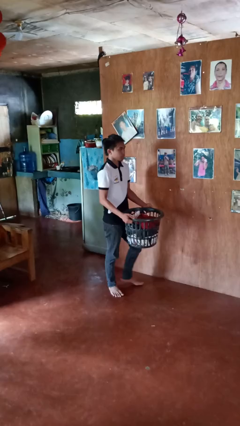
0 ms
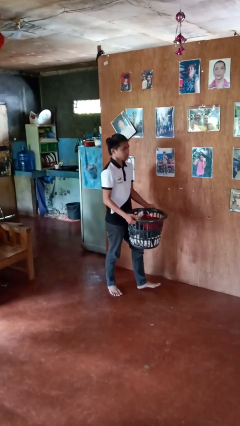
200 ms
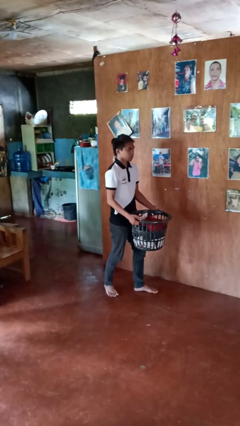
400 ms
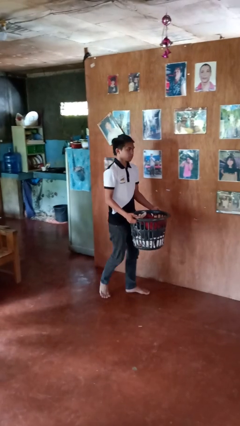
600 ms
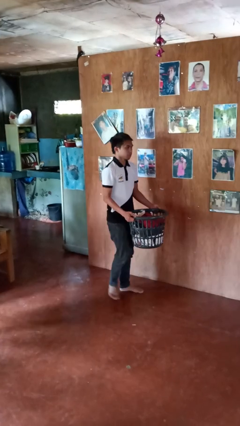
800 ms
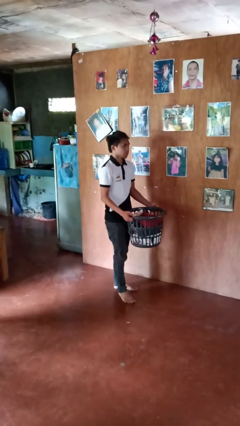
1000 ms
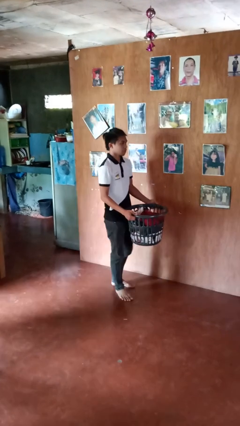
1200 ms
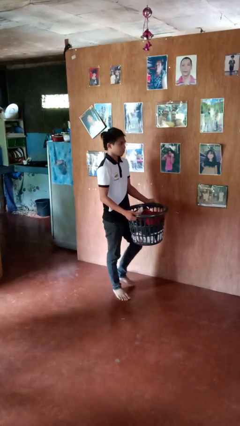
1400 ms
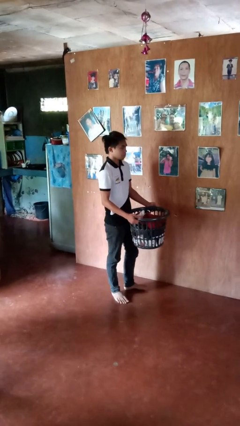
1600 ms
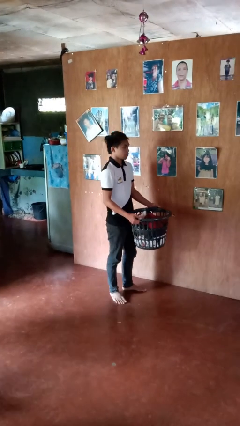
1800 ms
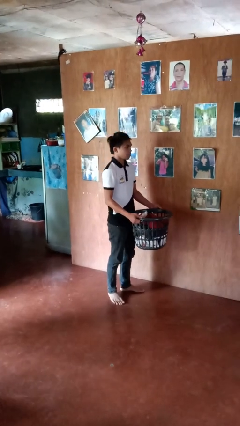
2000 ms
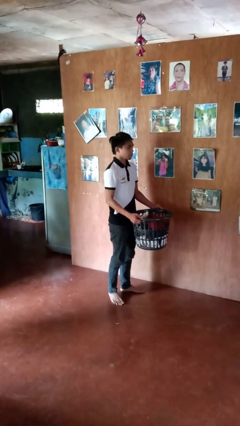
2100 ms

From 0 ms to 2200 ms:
person carries laundry basket

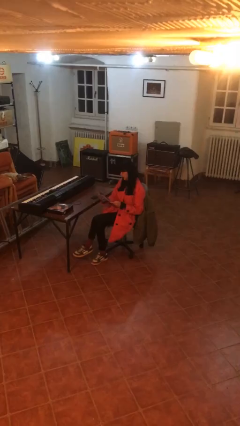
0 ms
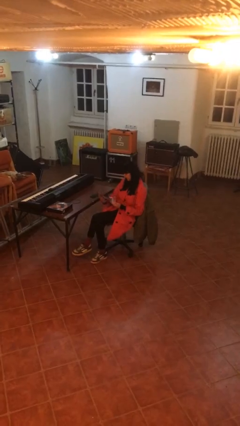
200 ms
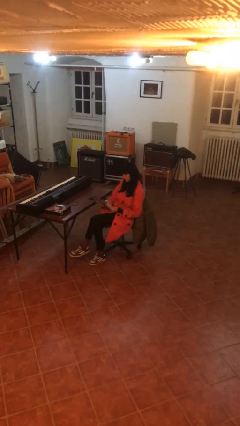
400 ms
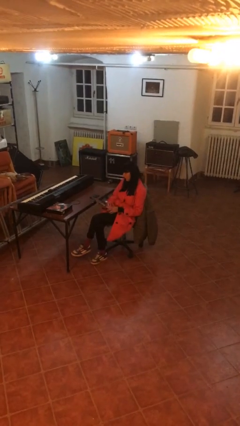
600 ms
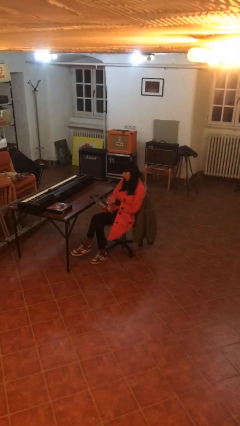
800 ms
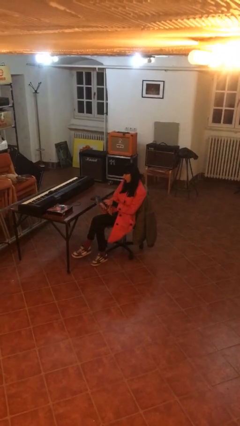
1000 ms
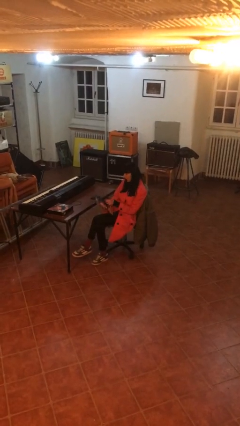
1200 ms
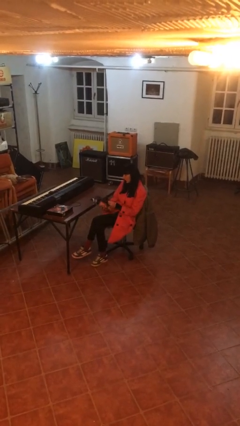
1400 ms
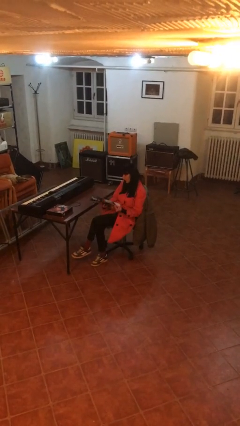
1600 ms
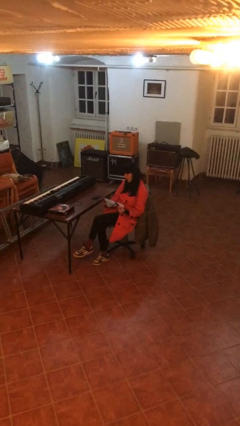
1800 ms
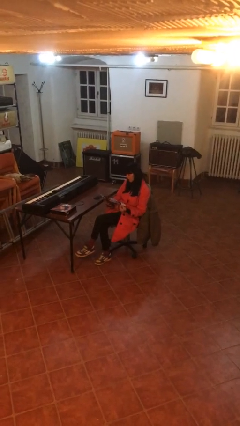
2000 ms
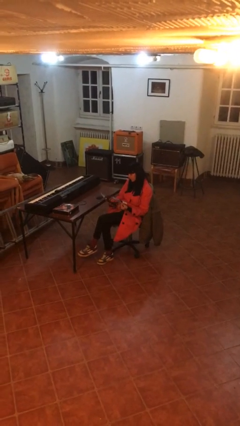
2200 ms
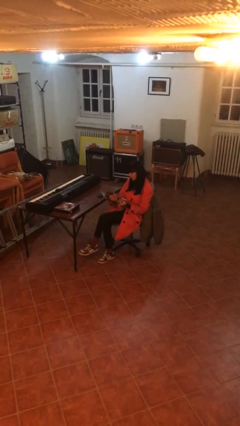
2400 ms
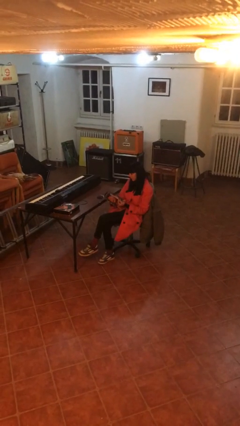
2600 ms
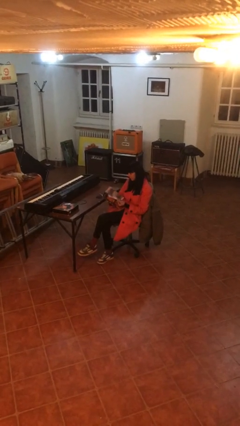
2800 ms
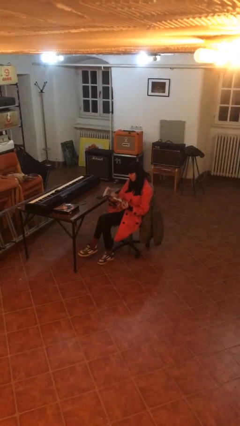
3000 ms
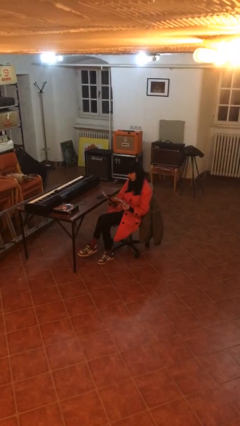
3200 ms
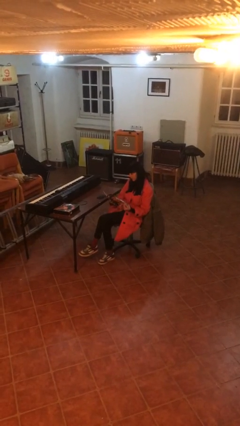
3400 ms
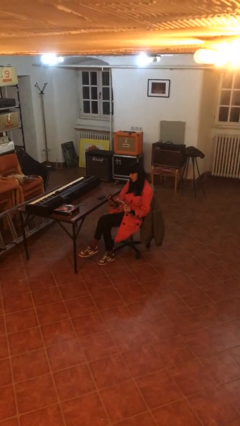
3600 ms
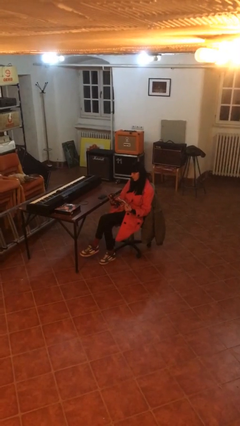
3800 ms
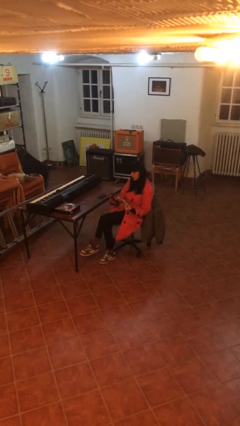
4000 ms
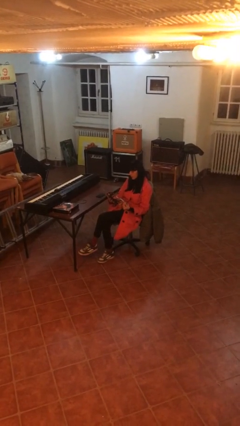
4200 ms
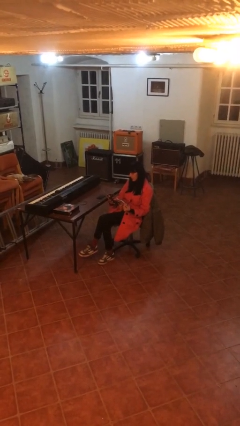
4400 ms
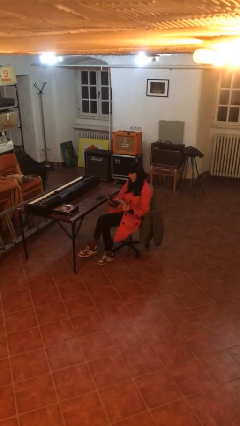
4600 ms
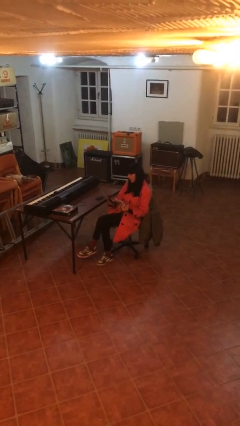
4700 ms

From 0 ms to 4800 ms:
person reads document

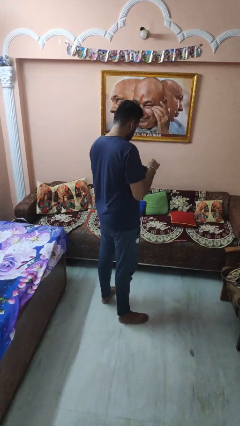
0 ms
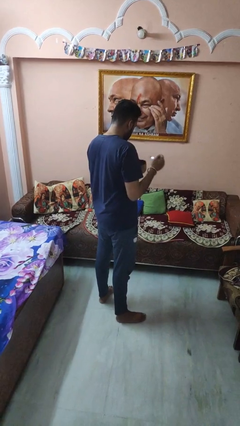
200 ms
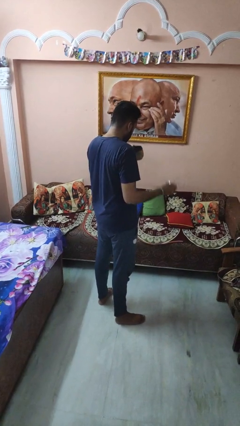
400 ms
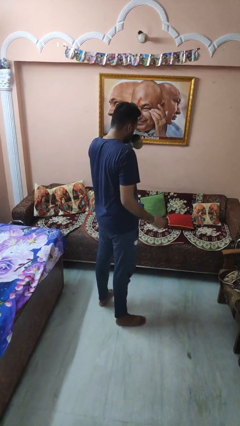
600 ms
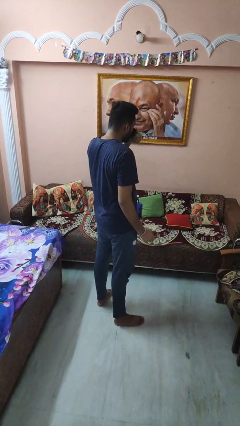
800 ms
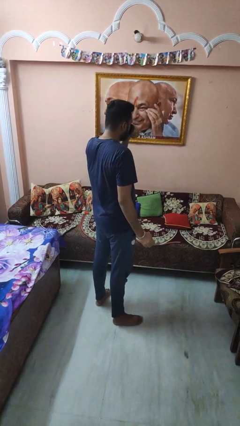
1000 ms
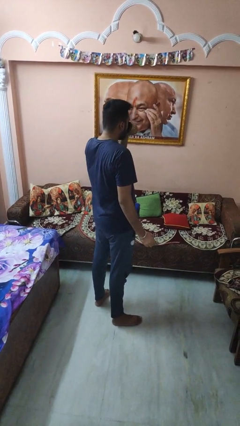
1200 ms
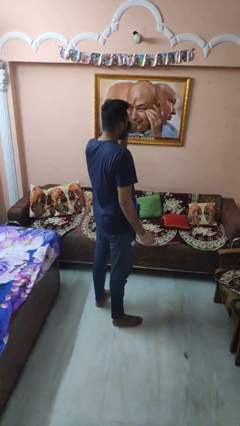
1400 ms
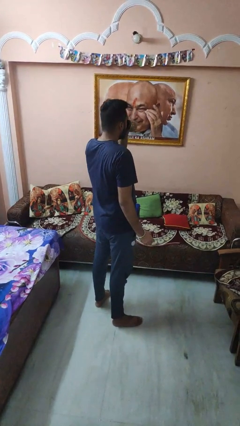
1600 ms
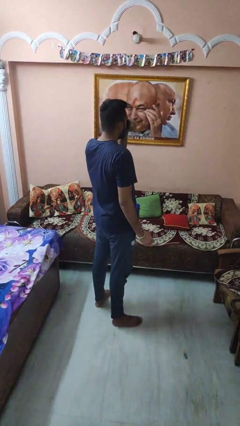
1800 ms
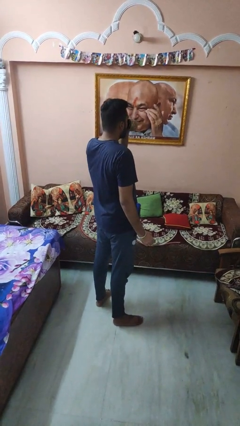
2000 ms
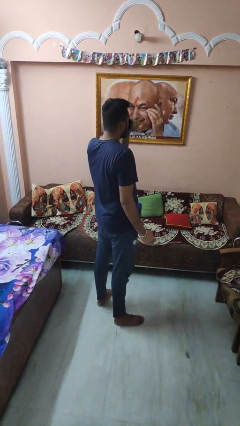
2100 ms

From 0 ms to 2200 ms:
person drinks from mug

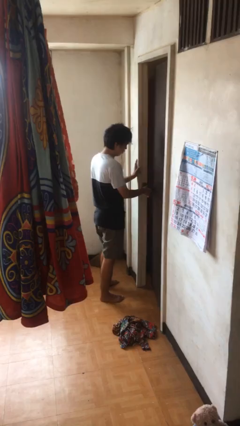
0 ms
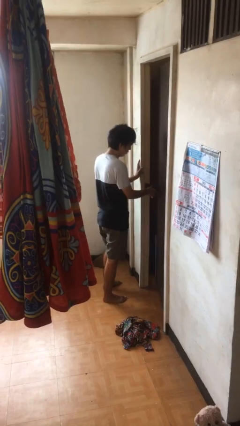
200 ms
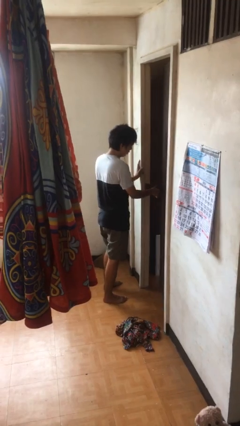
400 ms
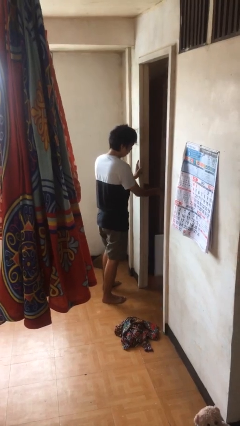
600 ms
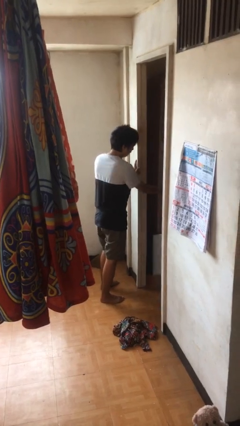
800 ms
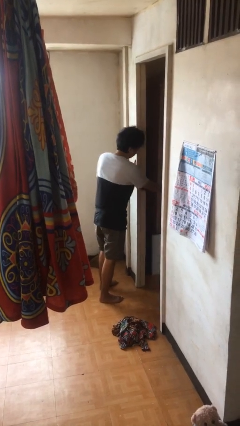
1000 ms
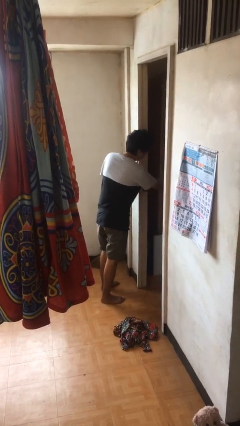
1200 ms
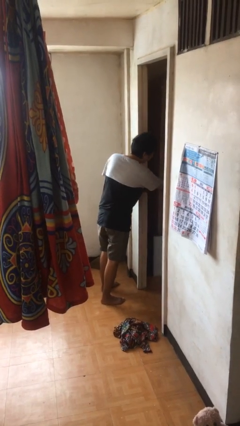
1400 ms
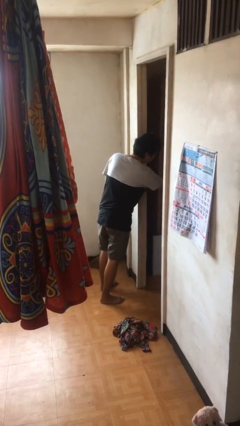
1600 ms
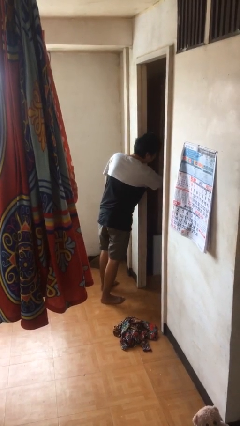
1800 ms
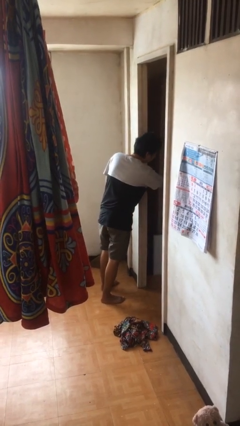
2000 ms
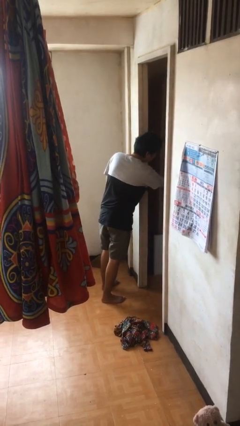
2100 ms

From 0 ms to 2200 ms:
person opens facility door

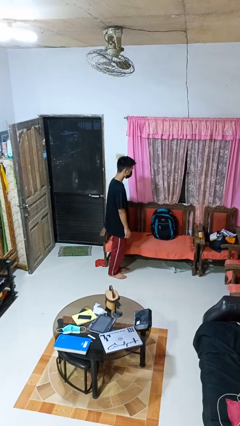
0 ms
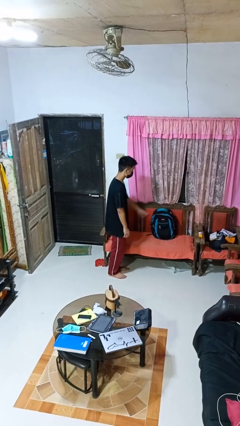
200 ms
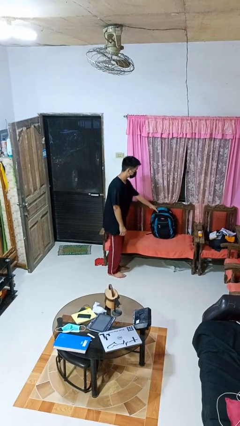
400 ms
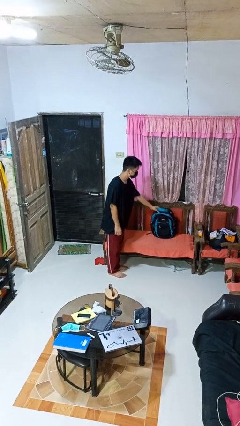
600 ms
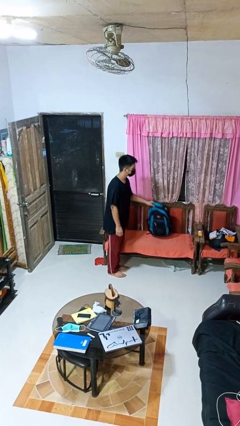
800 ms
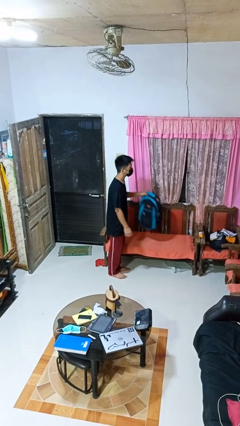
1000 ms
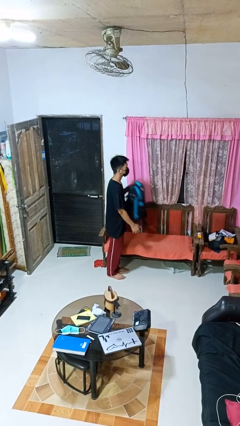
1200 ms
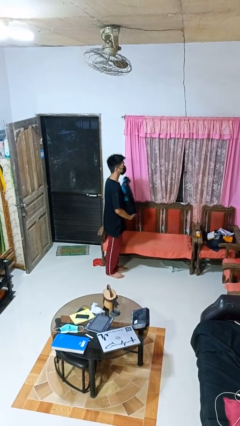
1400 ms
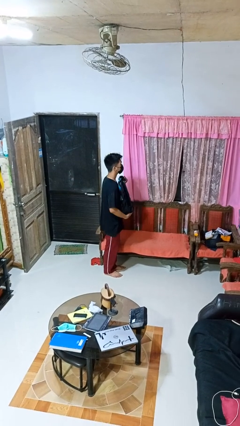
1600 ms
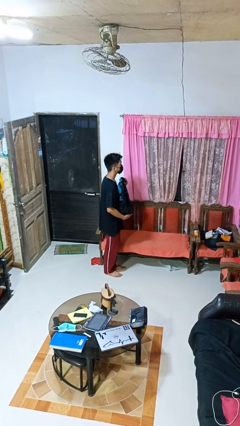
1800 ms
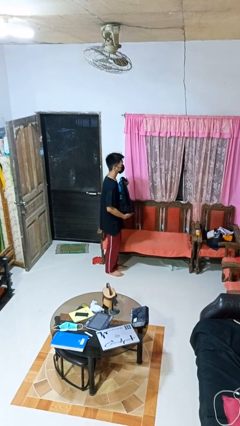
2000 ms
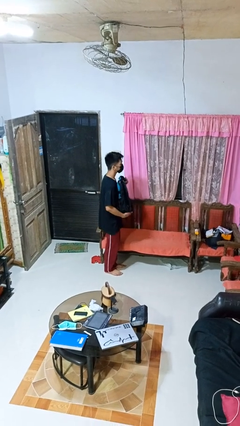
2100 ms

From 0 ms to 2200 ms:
person picks up object from couch

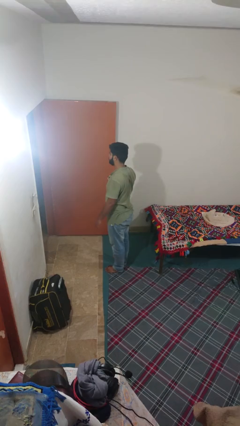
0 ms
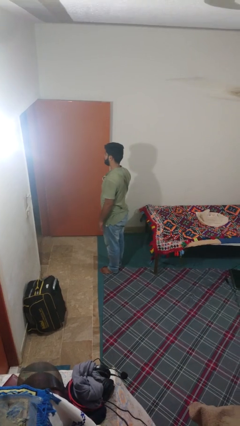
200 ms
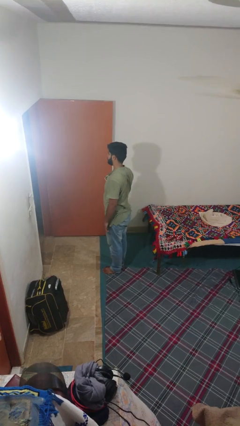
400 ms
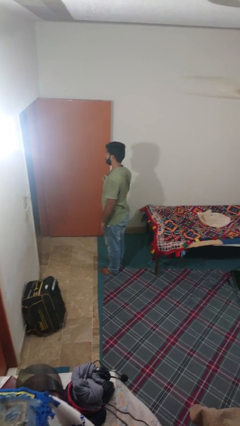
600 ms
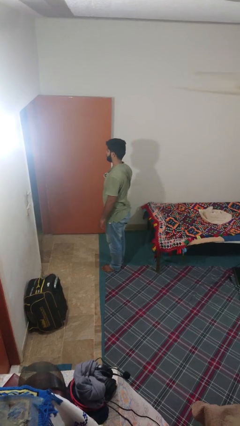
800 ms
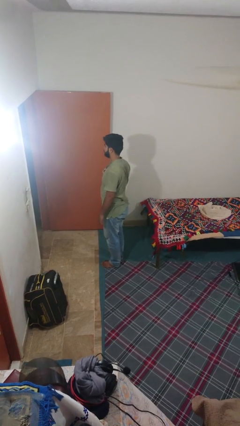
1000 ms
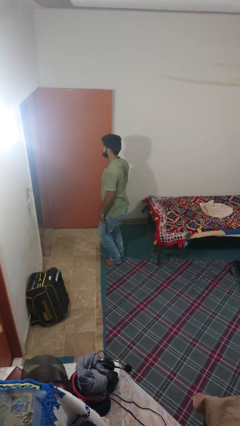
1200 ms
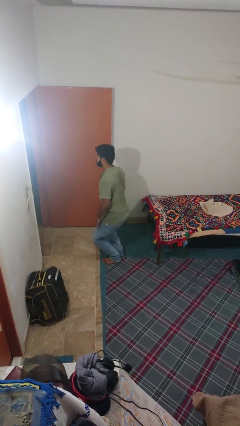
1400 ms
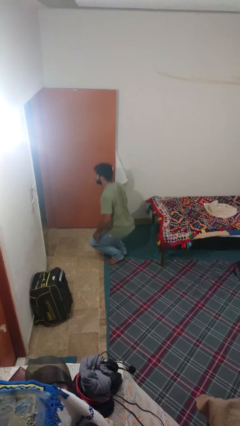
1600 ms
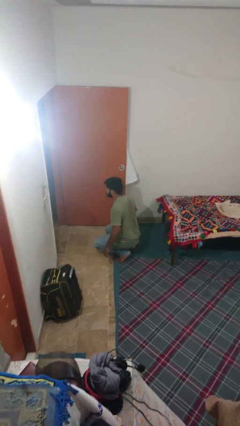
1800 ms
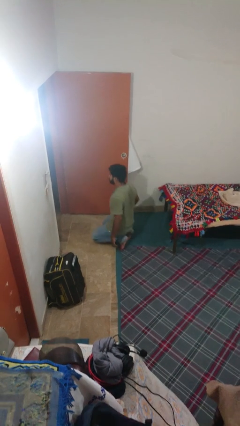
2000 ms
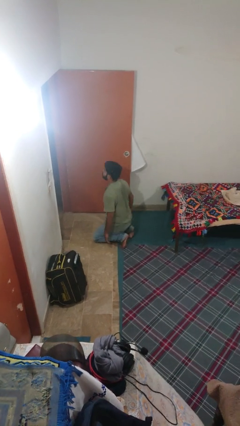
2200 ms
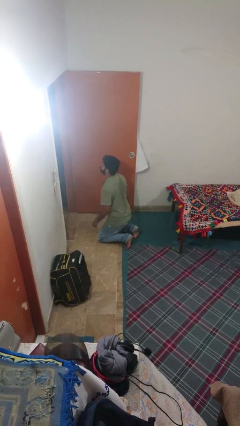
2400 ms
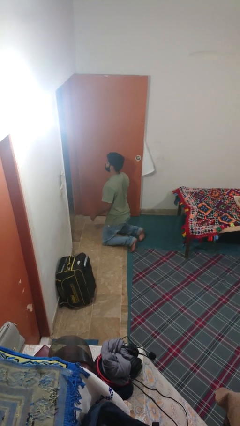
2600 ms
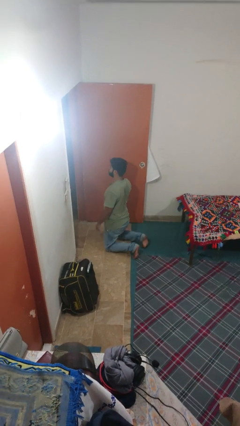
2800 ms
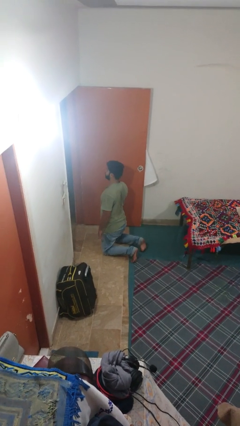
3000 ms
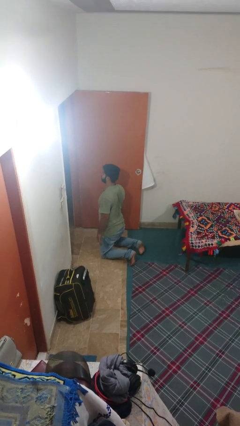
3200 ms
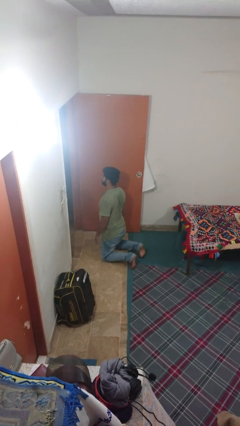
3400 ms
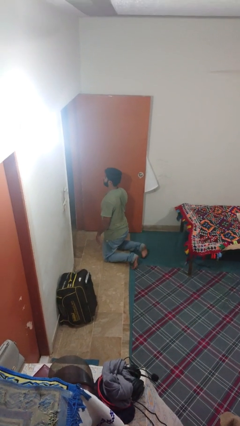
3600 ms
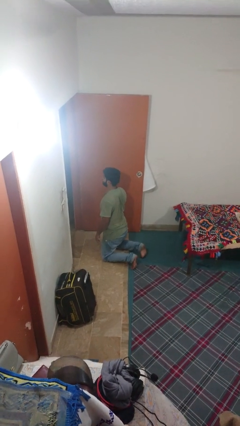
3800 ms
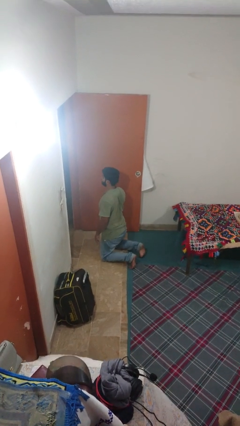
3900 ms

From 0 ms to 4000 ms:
person kneels

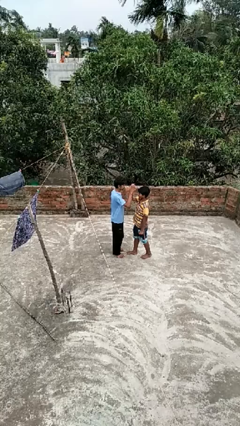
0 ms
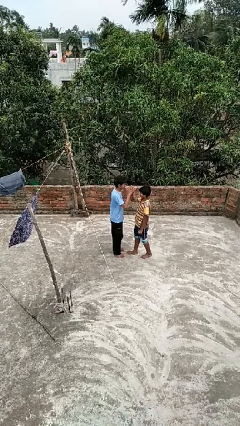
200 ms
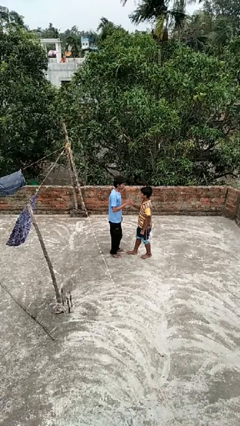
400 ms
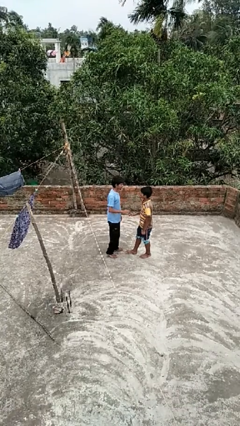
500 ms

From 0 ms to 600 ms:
person highfives hand
